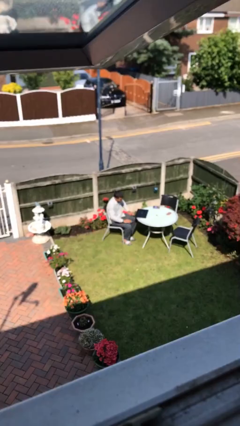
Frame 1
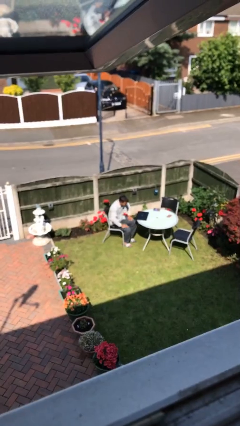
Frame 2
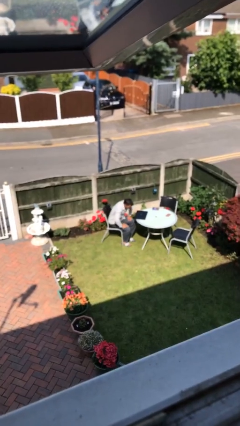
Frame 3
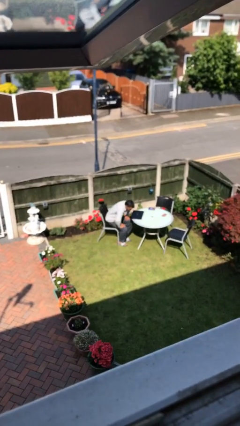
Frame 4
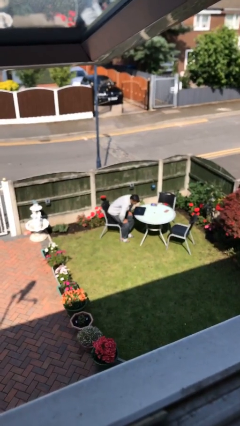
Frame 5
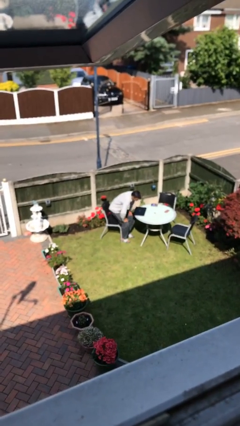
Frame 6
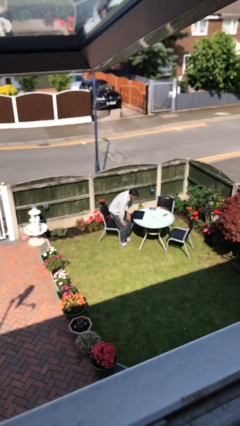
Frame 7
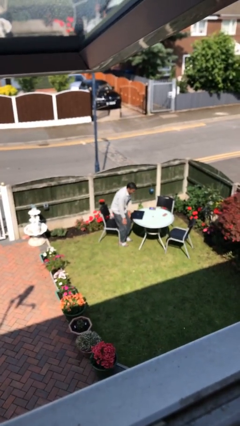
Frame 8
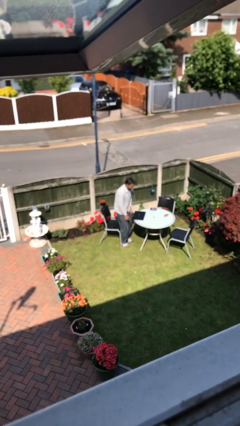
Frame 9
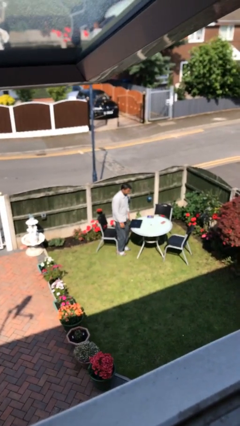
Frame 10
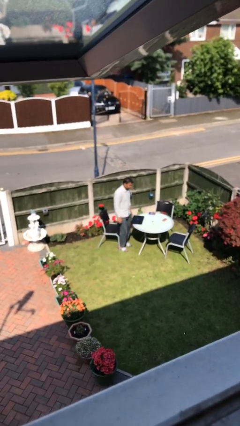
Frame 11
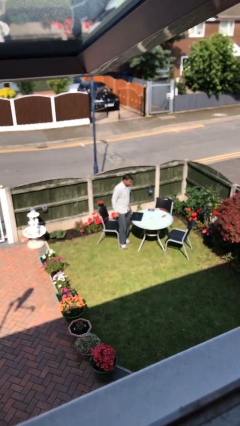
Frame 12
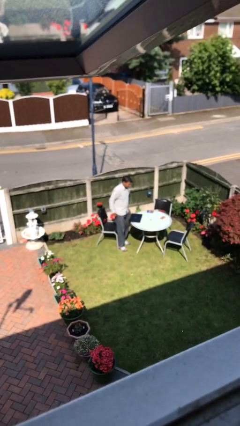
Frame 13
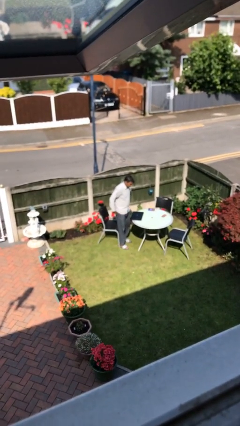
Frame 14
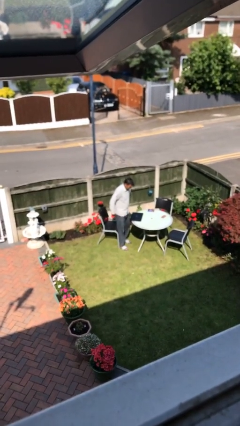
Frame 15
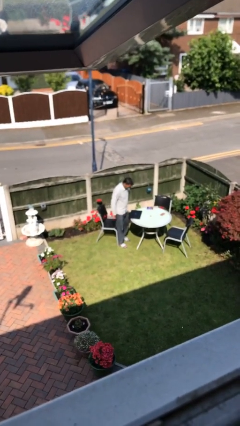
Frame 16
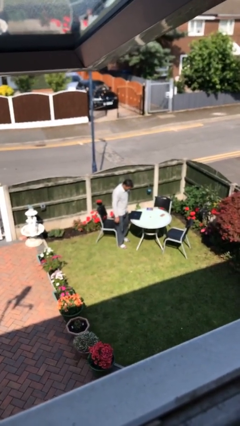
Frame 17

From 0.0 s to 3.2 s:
person stands up

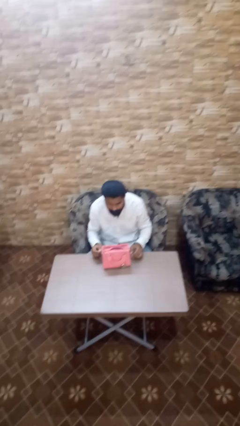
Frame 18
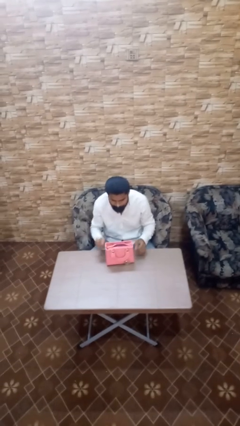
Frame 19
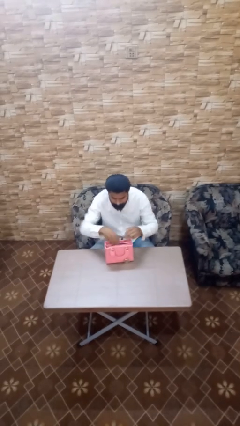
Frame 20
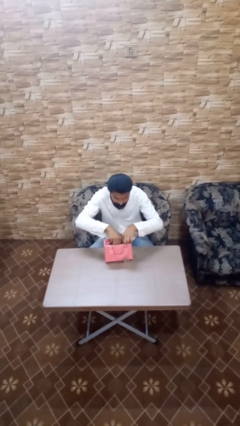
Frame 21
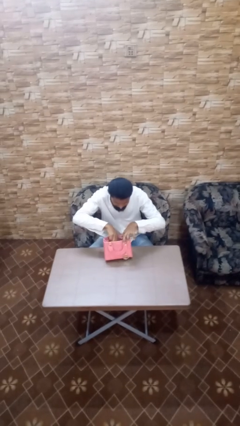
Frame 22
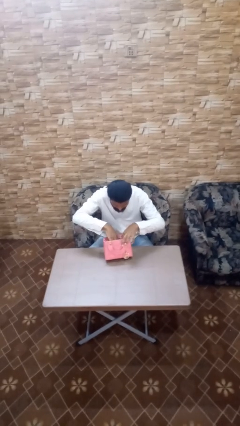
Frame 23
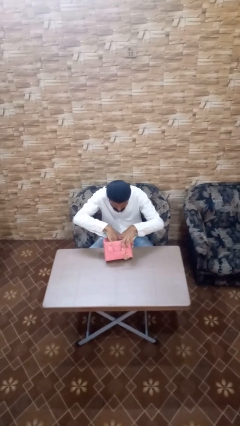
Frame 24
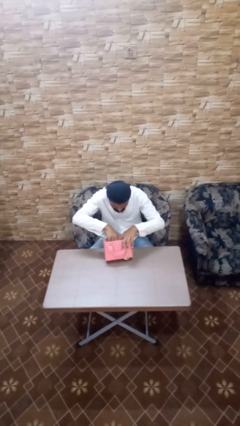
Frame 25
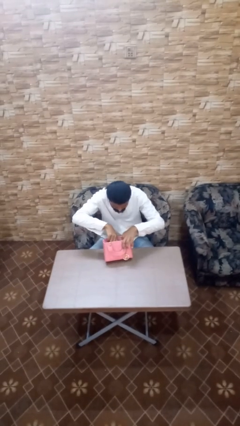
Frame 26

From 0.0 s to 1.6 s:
person searches in purse

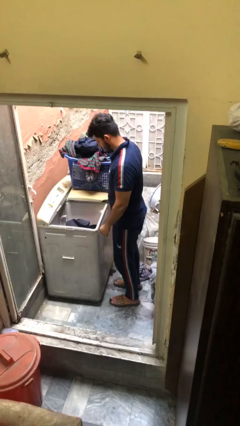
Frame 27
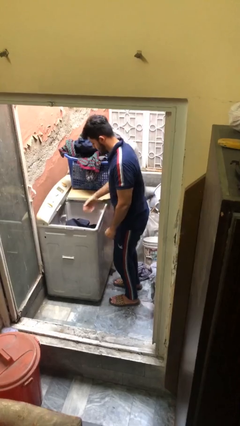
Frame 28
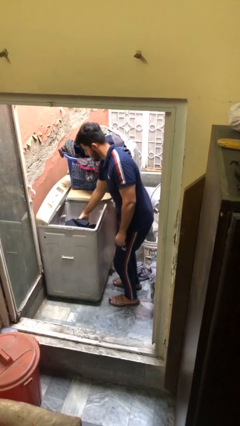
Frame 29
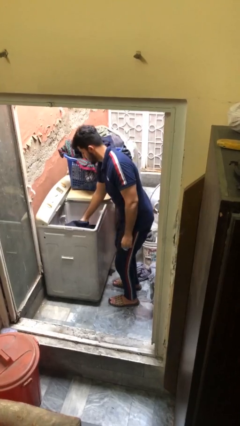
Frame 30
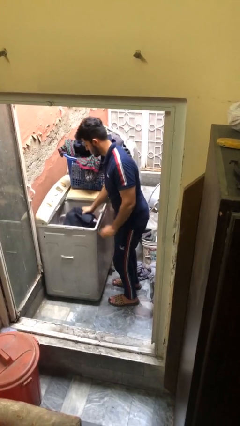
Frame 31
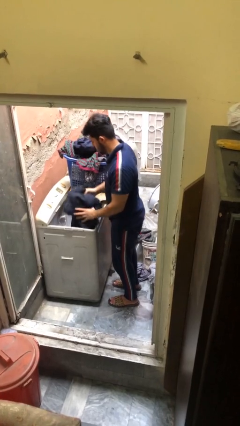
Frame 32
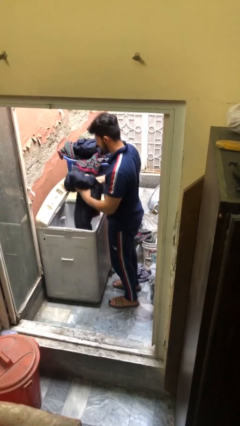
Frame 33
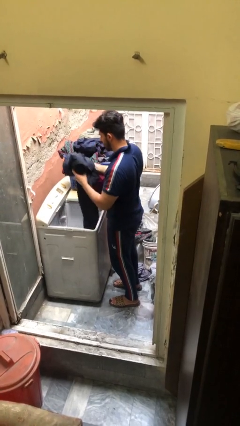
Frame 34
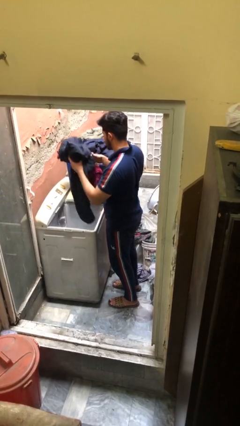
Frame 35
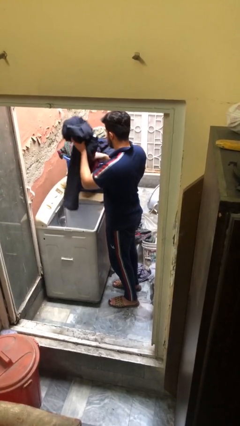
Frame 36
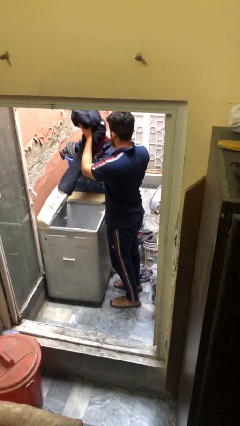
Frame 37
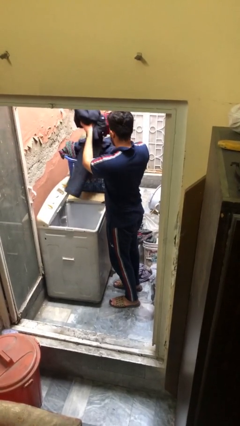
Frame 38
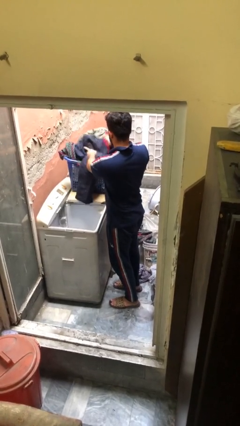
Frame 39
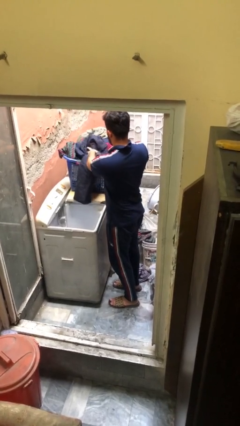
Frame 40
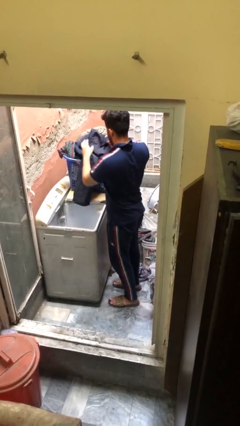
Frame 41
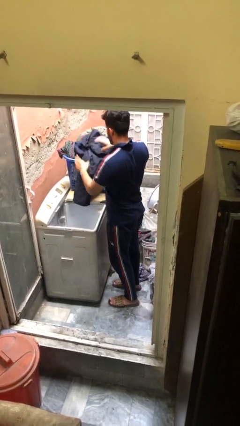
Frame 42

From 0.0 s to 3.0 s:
person loads clotheswasher

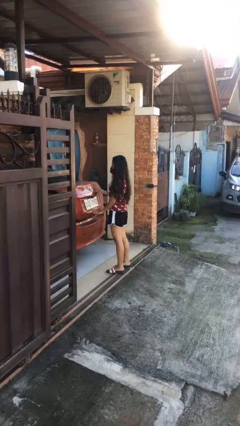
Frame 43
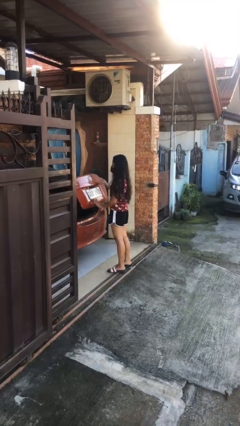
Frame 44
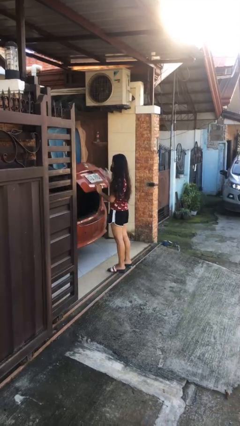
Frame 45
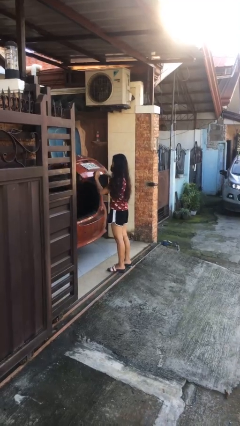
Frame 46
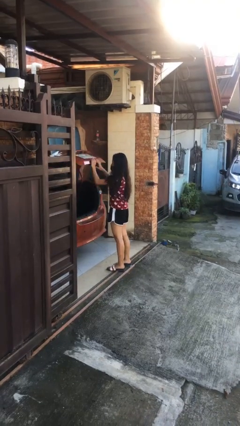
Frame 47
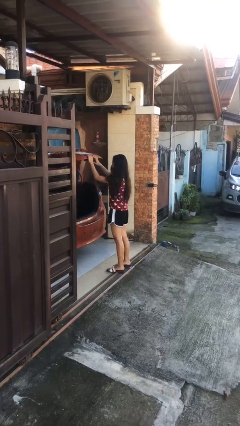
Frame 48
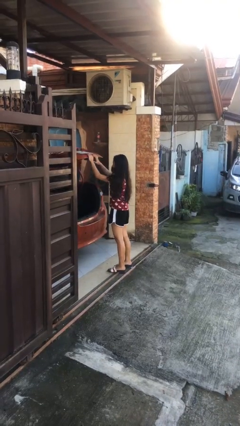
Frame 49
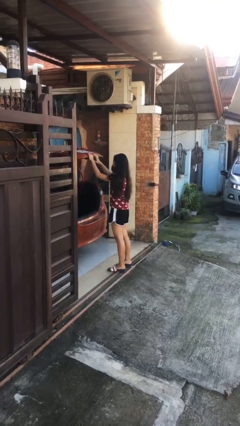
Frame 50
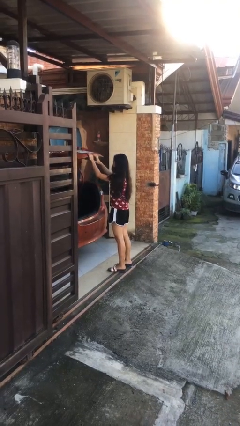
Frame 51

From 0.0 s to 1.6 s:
person opens car trunk

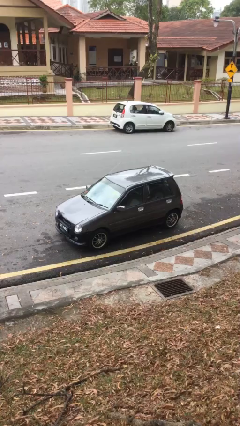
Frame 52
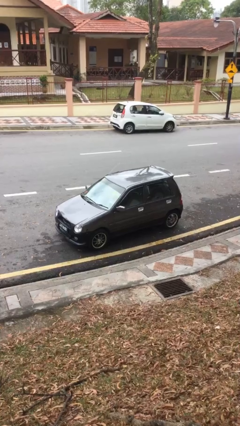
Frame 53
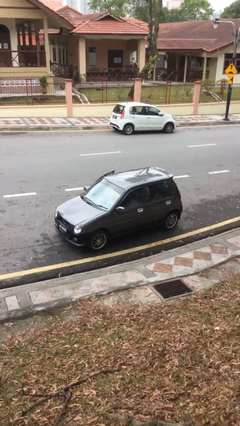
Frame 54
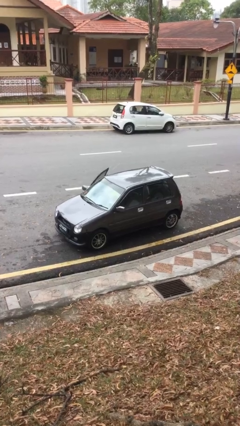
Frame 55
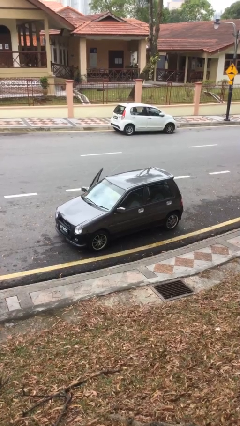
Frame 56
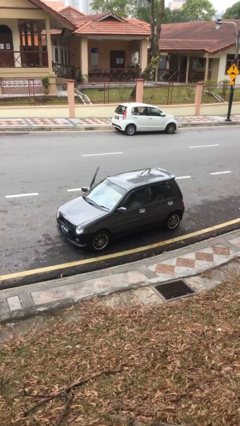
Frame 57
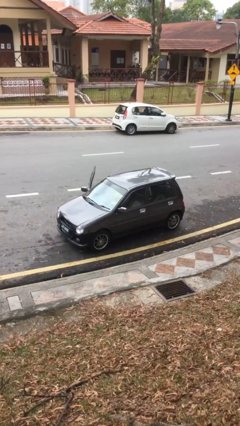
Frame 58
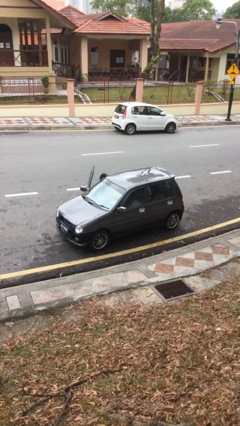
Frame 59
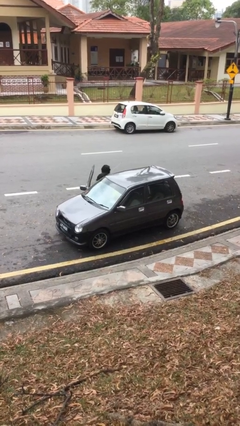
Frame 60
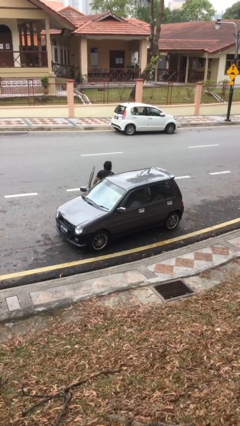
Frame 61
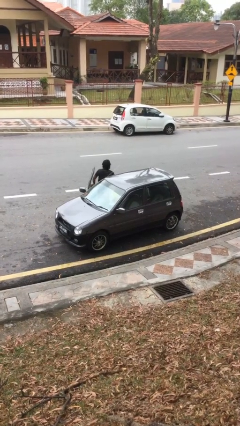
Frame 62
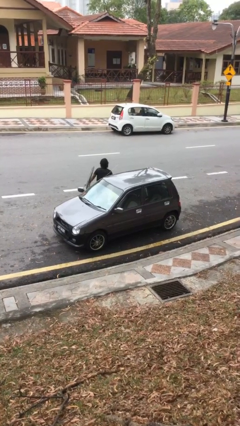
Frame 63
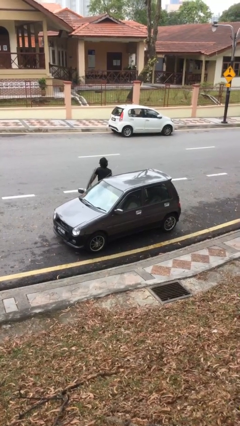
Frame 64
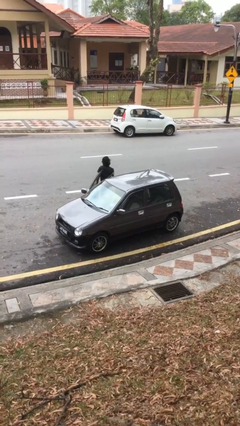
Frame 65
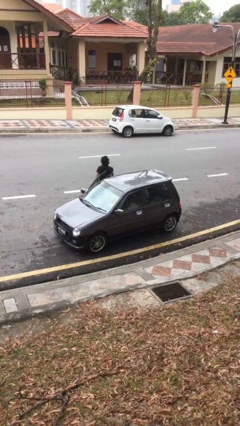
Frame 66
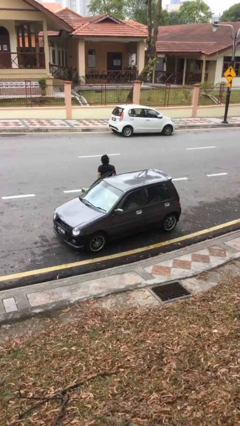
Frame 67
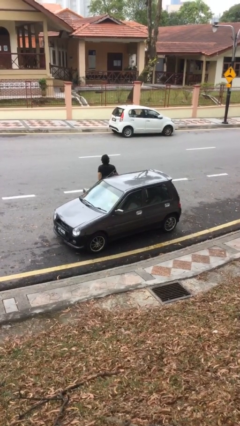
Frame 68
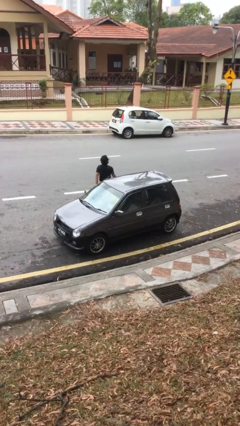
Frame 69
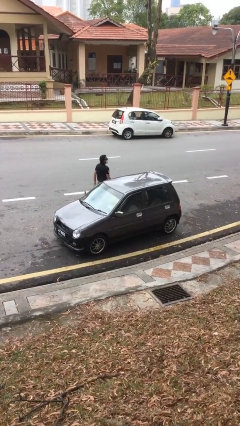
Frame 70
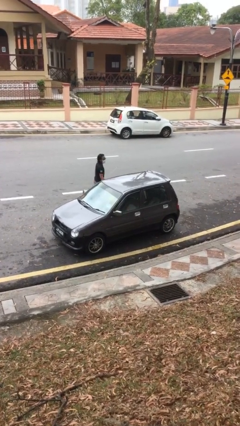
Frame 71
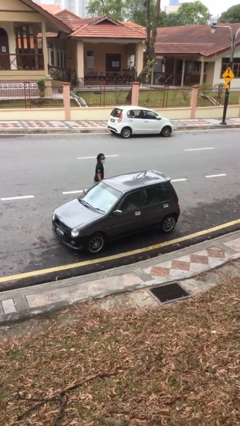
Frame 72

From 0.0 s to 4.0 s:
car drops off person

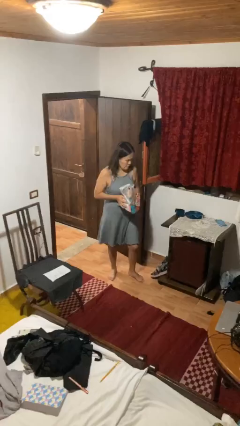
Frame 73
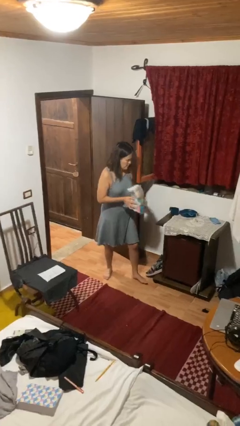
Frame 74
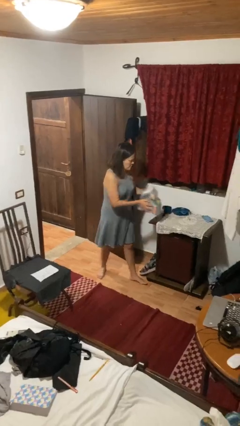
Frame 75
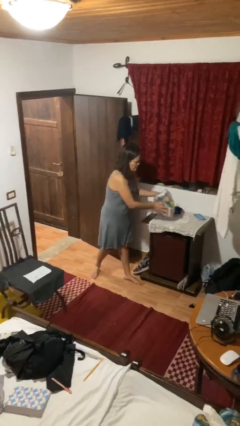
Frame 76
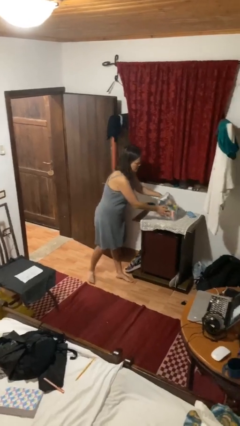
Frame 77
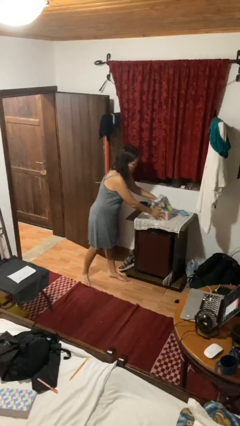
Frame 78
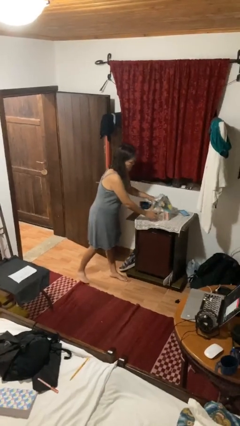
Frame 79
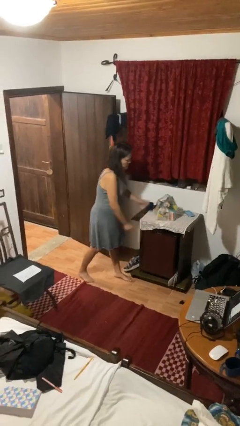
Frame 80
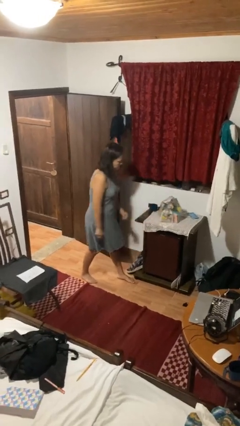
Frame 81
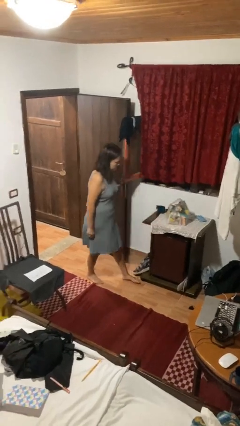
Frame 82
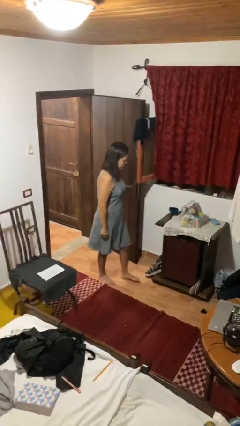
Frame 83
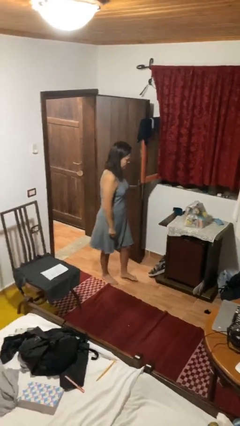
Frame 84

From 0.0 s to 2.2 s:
person puts down object on countertop

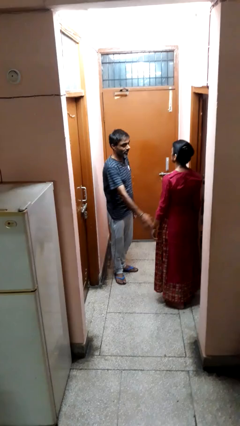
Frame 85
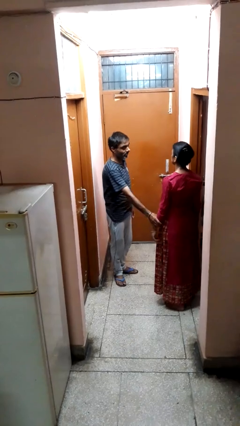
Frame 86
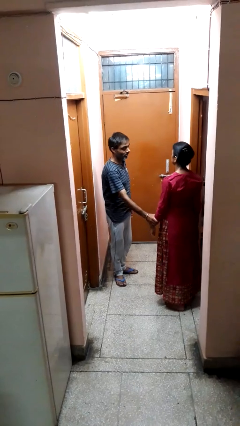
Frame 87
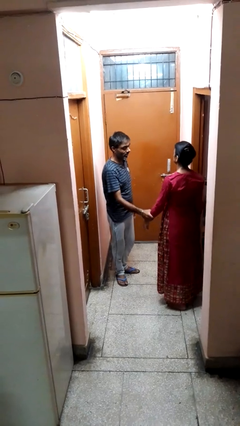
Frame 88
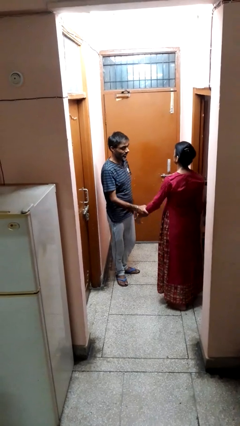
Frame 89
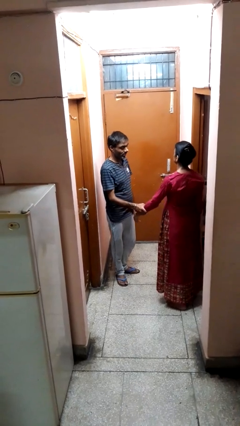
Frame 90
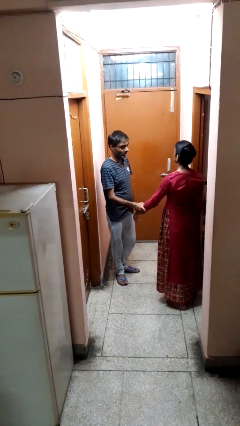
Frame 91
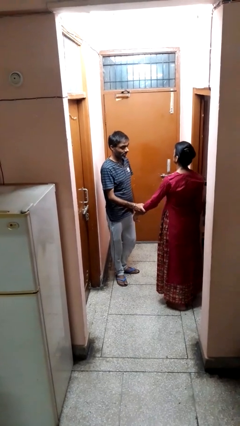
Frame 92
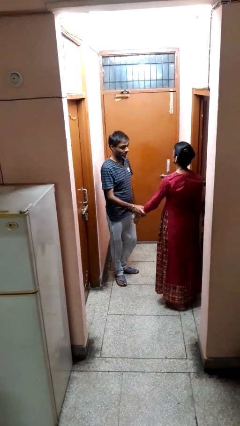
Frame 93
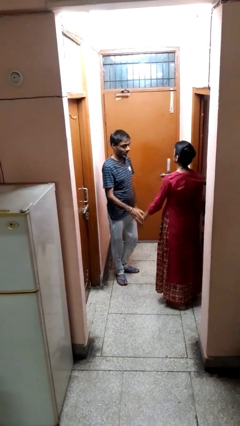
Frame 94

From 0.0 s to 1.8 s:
person grabs person by forearm
